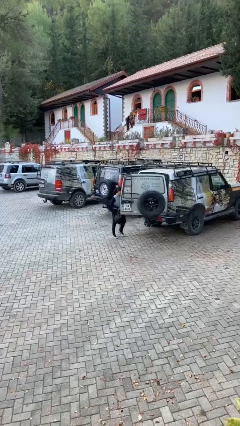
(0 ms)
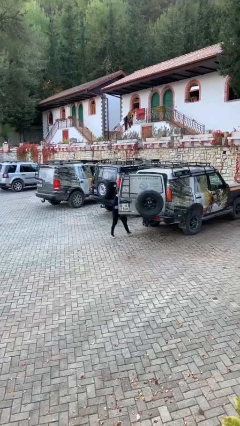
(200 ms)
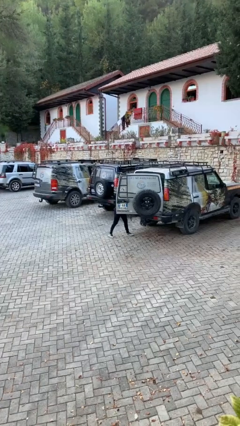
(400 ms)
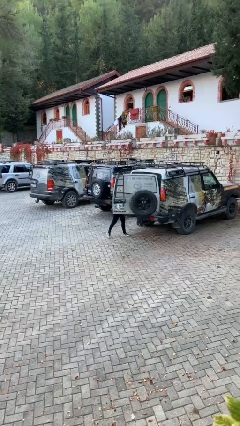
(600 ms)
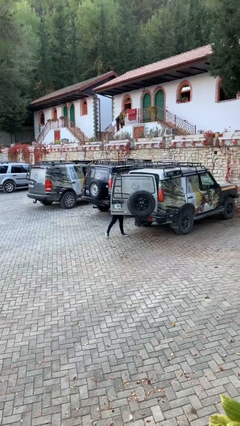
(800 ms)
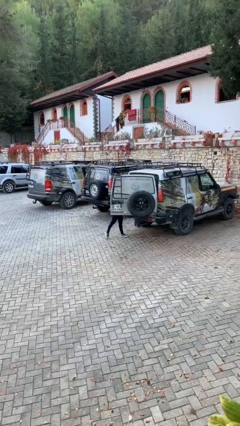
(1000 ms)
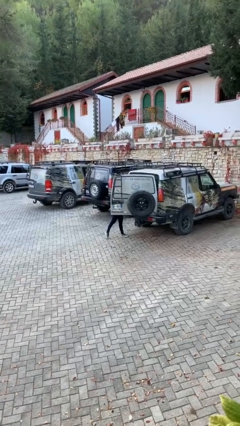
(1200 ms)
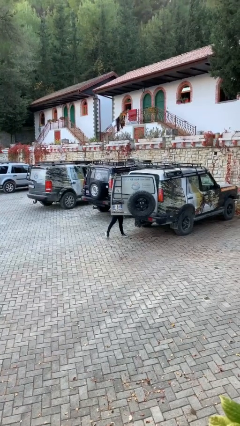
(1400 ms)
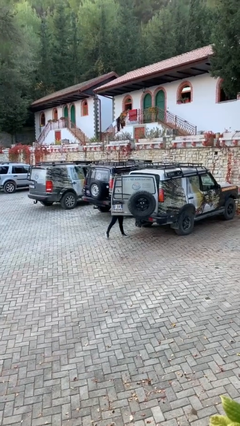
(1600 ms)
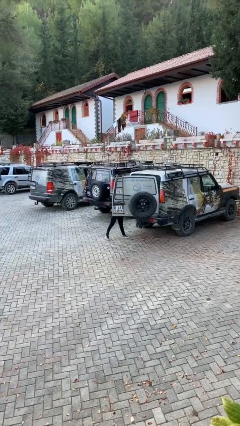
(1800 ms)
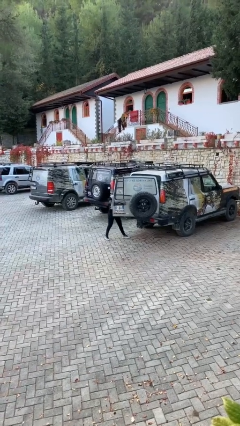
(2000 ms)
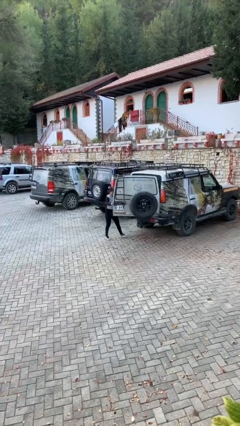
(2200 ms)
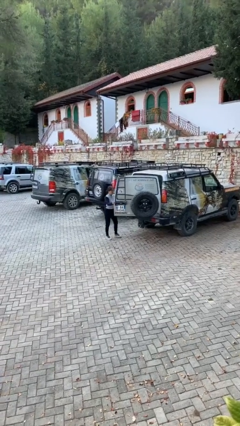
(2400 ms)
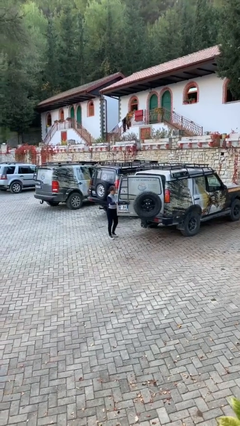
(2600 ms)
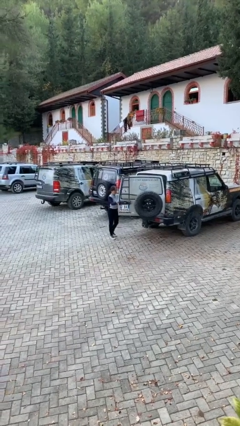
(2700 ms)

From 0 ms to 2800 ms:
person loads car

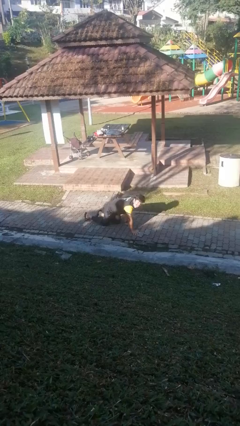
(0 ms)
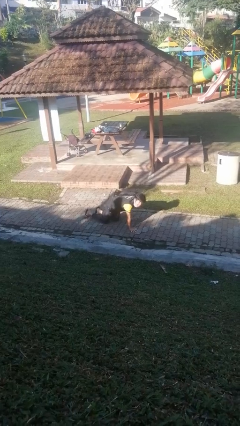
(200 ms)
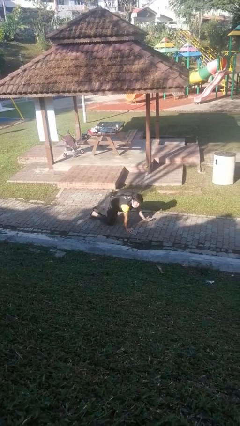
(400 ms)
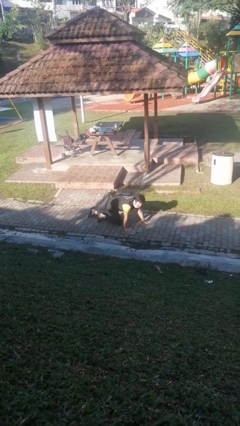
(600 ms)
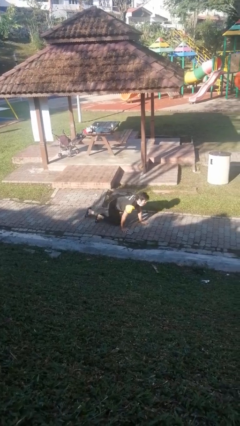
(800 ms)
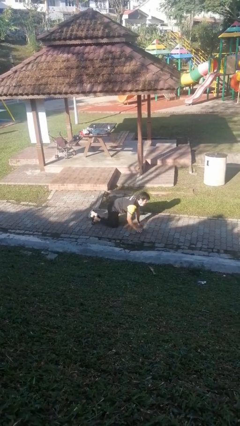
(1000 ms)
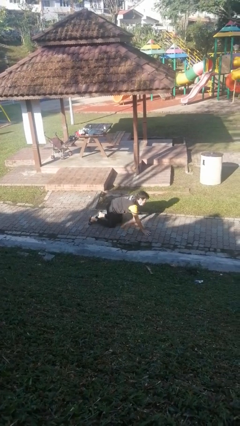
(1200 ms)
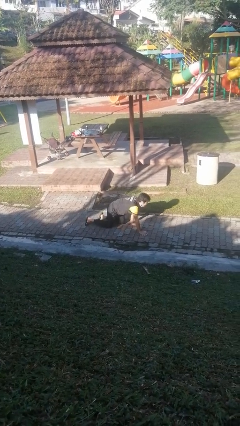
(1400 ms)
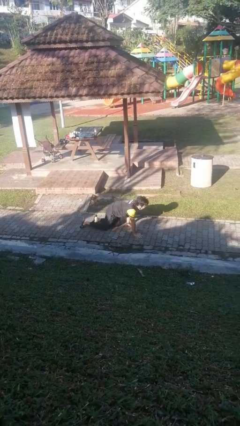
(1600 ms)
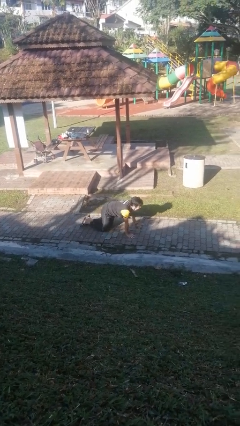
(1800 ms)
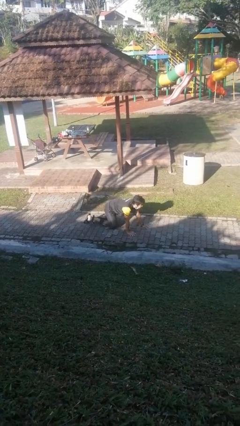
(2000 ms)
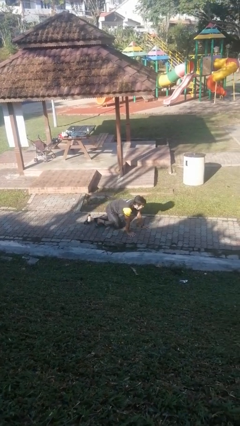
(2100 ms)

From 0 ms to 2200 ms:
person crawls

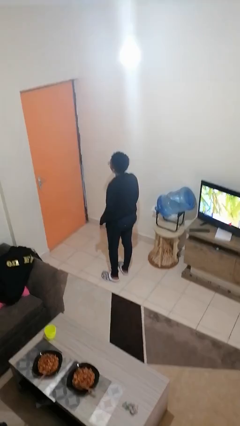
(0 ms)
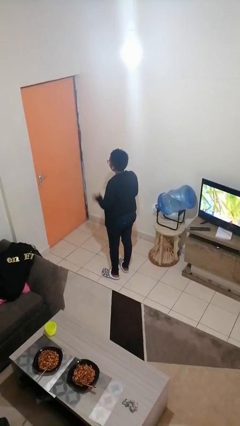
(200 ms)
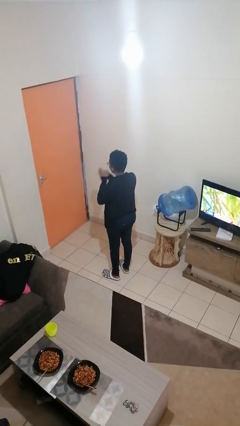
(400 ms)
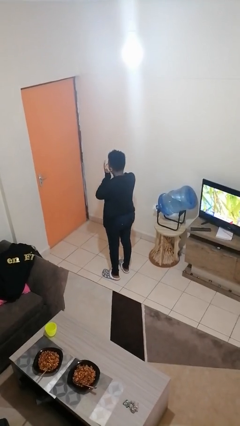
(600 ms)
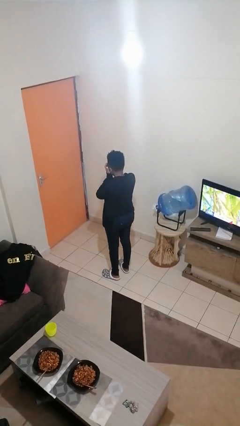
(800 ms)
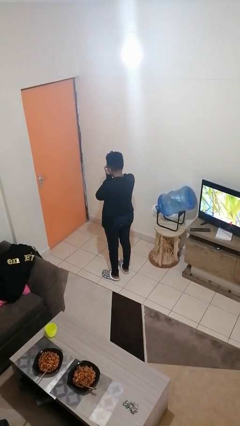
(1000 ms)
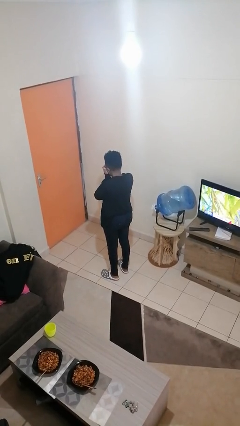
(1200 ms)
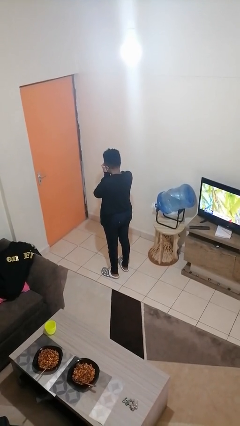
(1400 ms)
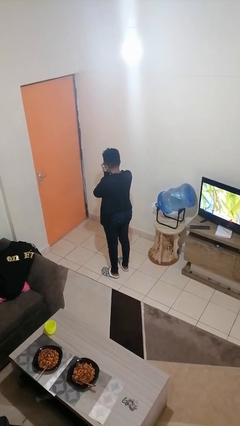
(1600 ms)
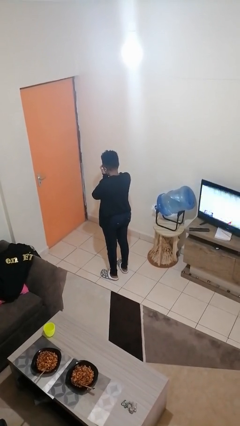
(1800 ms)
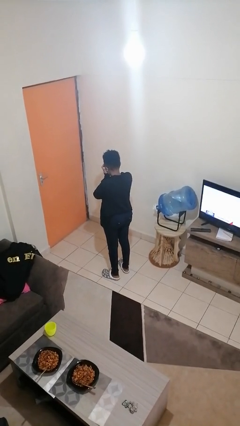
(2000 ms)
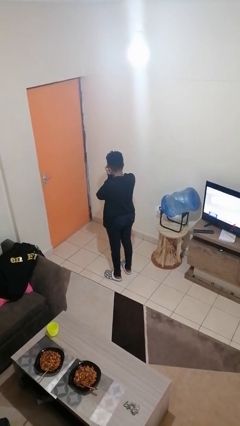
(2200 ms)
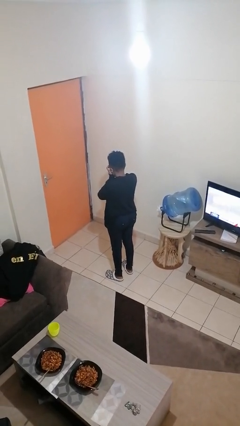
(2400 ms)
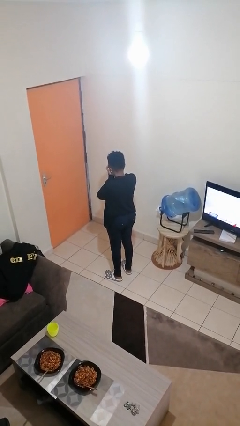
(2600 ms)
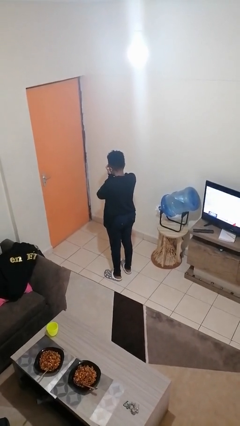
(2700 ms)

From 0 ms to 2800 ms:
person covers face with hands

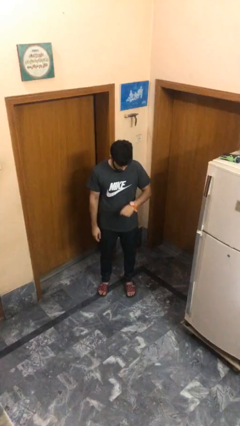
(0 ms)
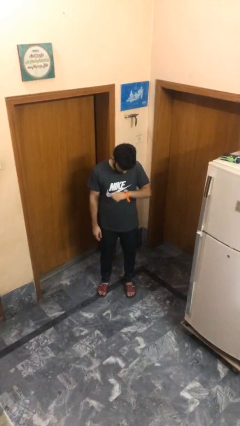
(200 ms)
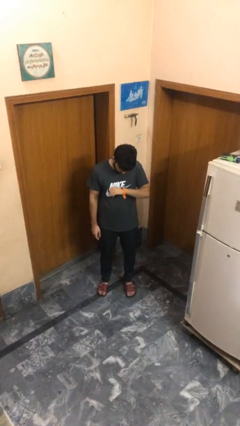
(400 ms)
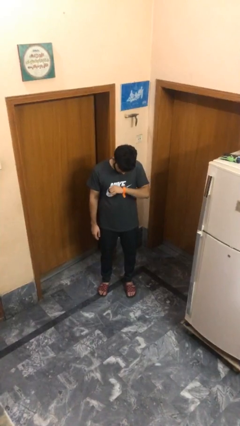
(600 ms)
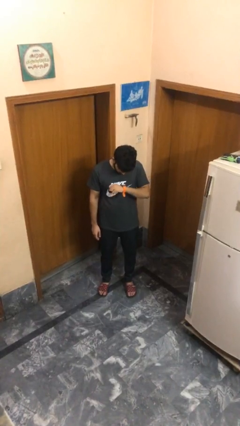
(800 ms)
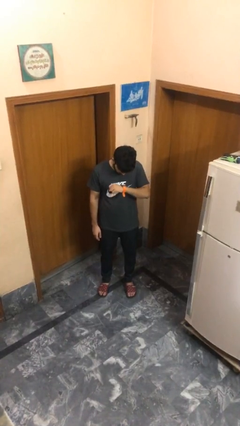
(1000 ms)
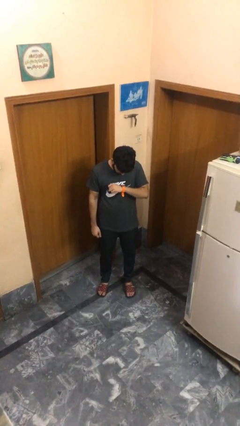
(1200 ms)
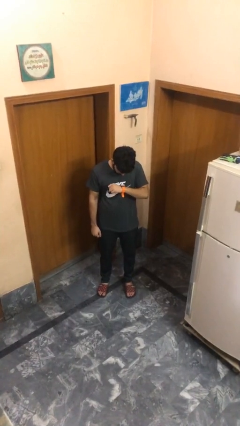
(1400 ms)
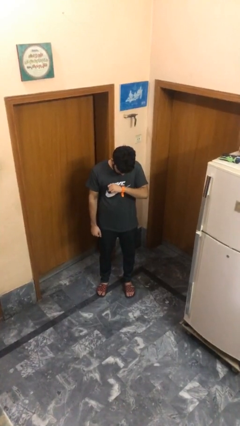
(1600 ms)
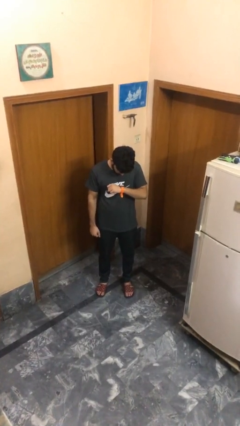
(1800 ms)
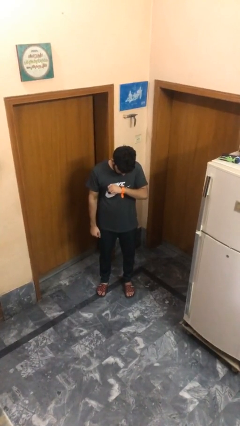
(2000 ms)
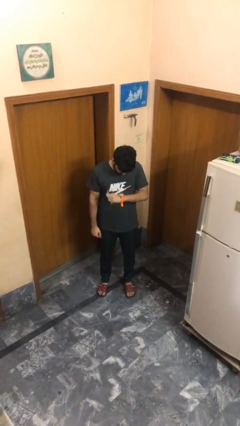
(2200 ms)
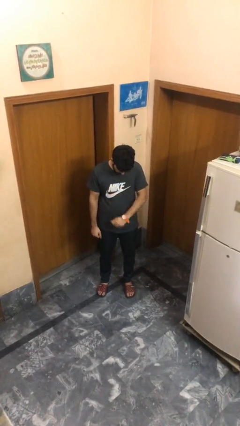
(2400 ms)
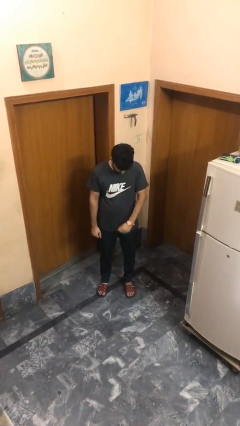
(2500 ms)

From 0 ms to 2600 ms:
person looks at wristwatch

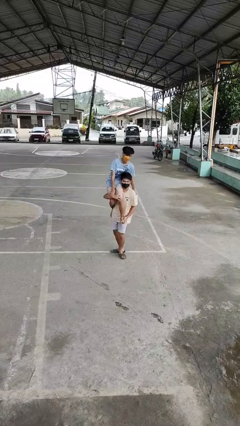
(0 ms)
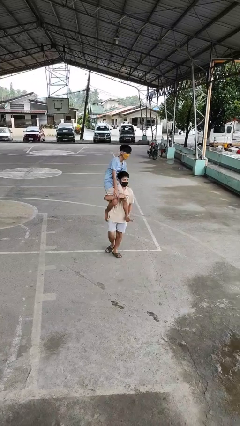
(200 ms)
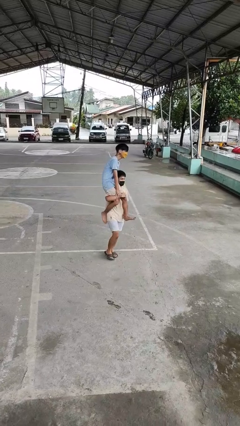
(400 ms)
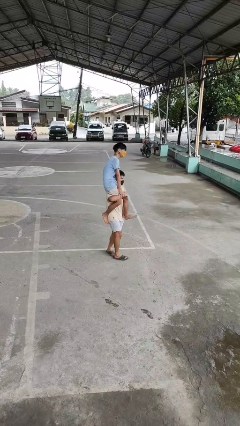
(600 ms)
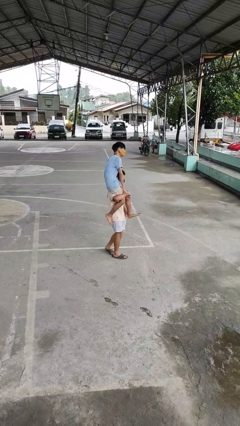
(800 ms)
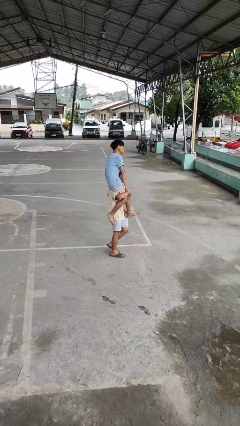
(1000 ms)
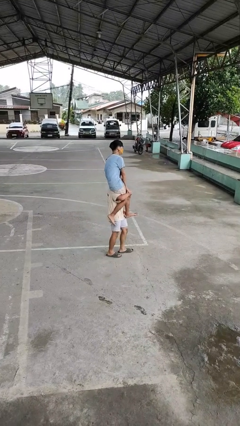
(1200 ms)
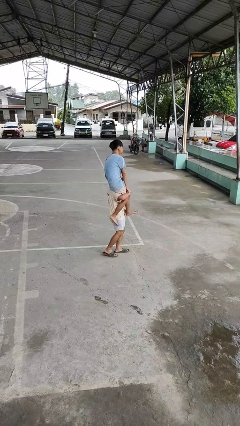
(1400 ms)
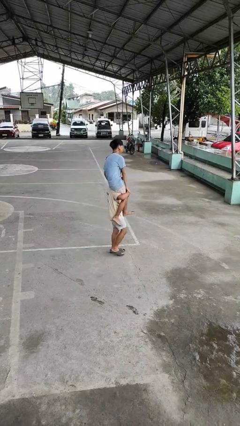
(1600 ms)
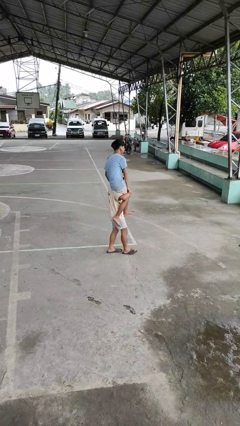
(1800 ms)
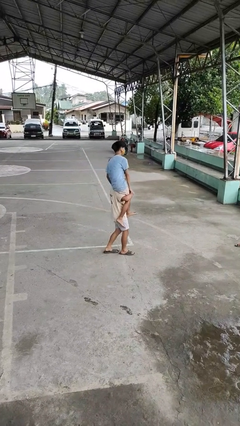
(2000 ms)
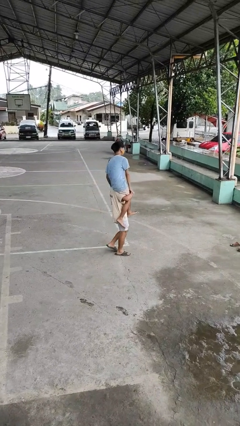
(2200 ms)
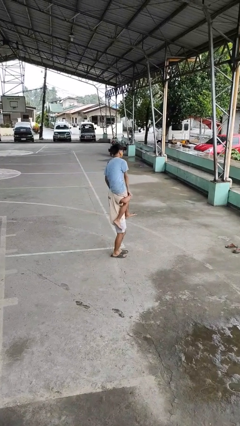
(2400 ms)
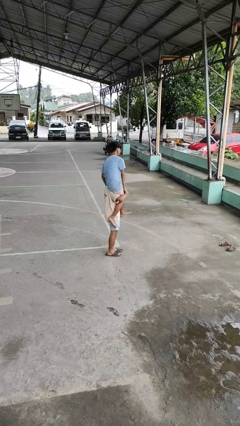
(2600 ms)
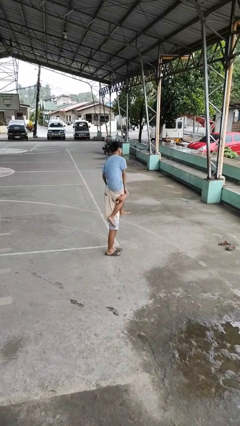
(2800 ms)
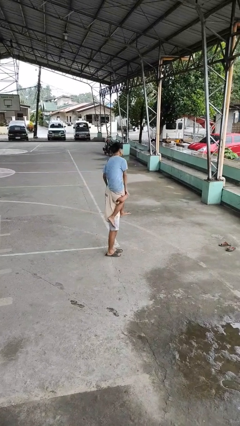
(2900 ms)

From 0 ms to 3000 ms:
person carries person on shoulders

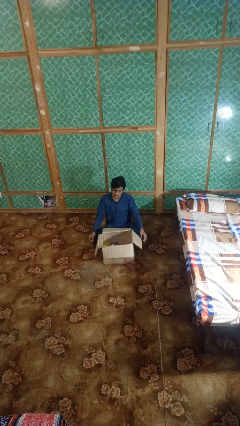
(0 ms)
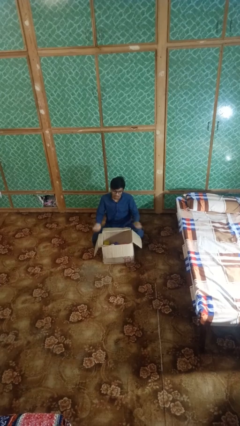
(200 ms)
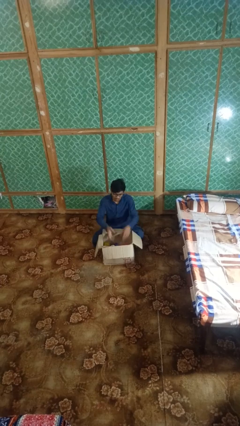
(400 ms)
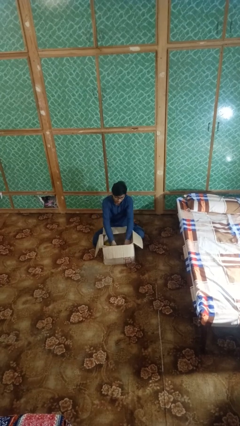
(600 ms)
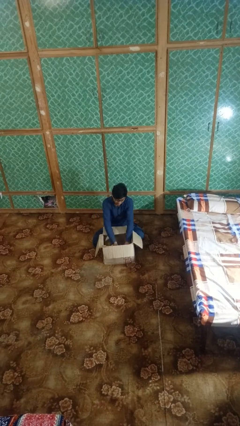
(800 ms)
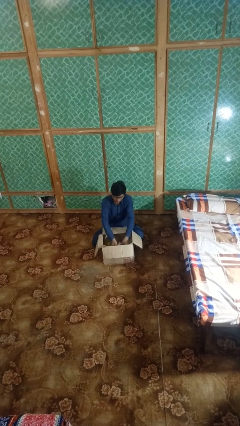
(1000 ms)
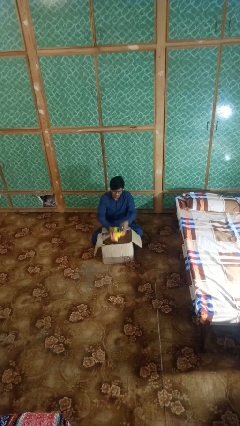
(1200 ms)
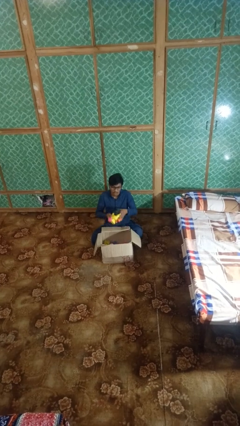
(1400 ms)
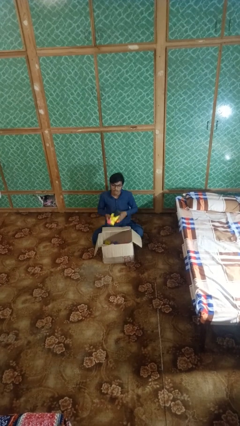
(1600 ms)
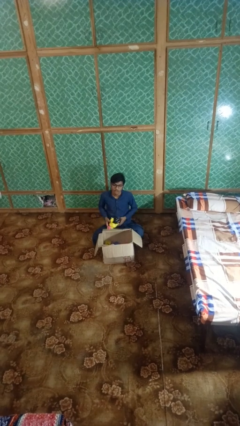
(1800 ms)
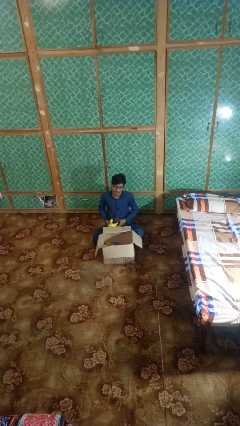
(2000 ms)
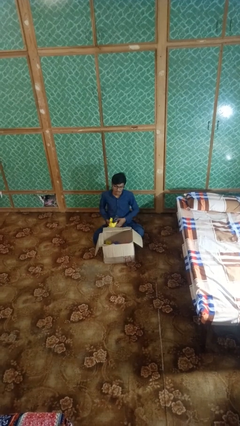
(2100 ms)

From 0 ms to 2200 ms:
person takes object from box

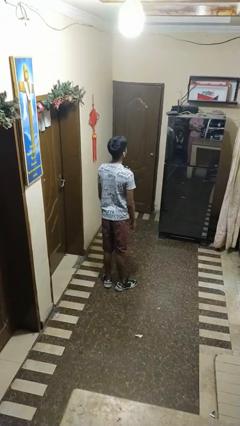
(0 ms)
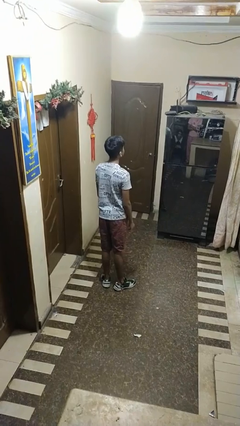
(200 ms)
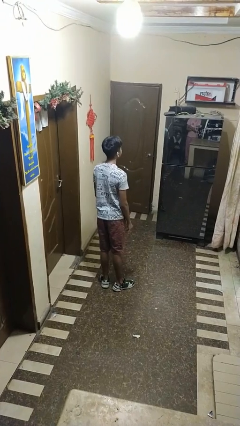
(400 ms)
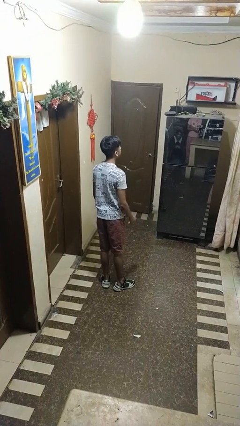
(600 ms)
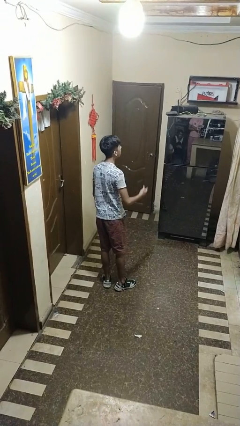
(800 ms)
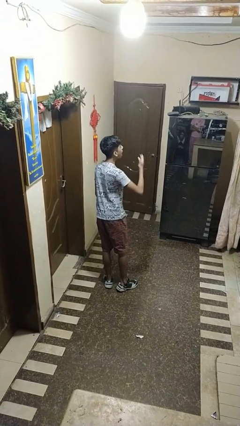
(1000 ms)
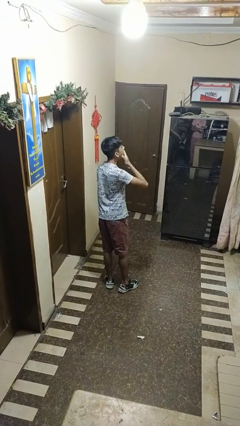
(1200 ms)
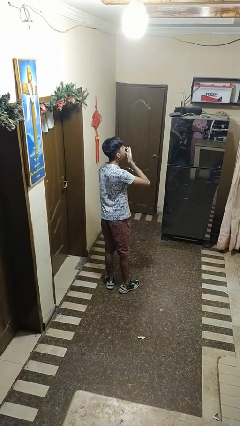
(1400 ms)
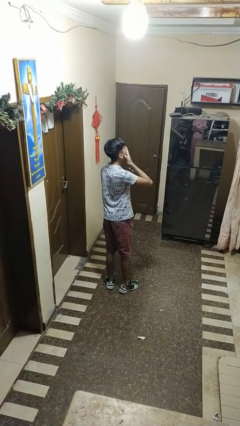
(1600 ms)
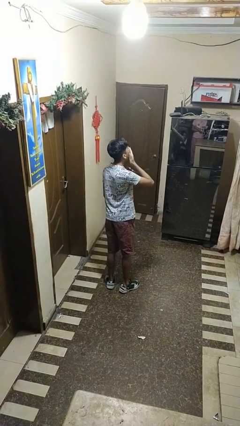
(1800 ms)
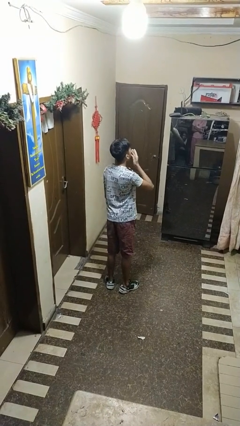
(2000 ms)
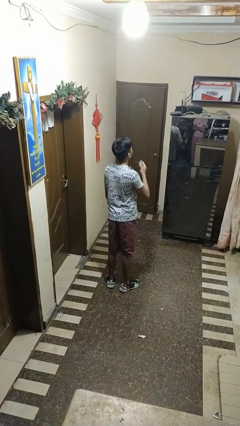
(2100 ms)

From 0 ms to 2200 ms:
person yawns
